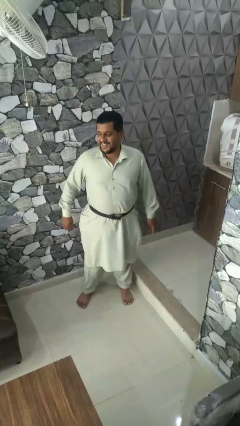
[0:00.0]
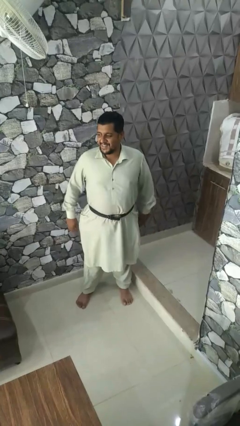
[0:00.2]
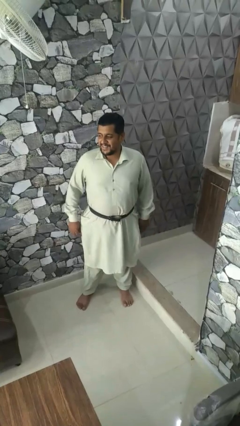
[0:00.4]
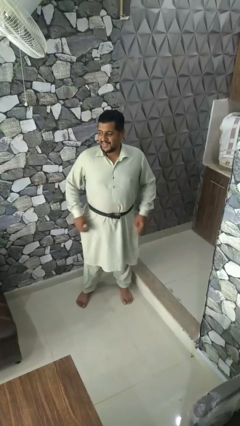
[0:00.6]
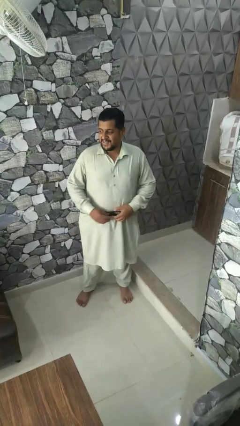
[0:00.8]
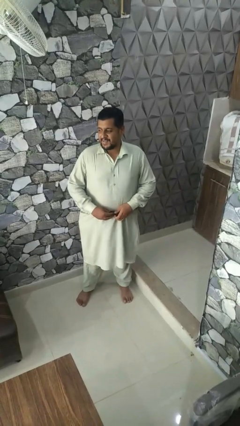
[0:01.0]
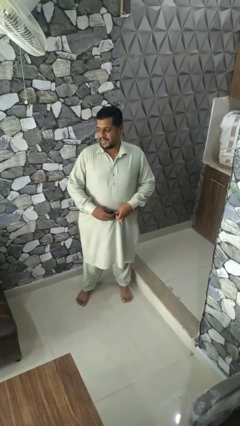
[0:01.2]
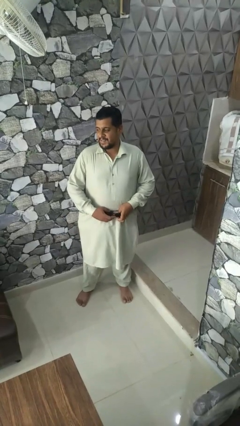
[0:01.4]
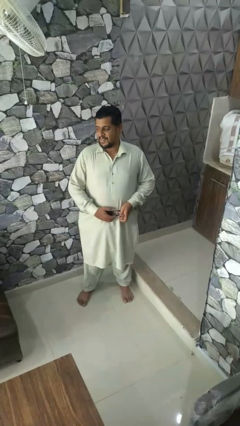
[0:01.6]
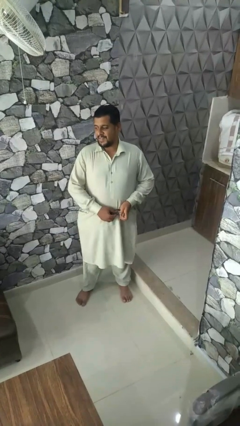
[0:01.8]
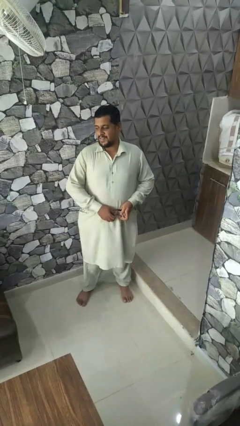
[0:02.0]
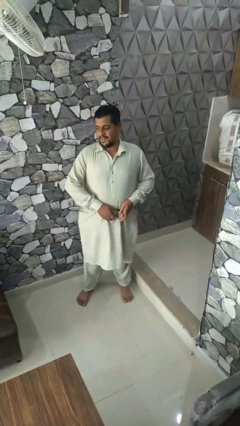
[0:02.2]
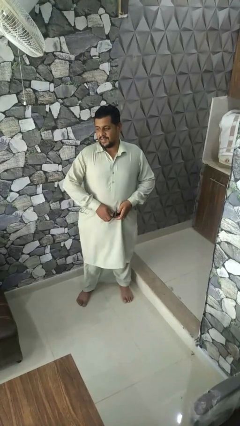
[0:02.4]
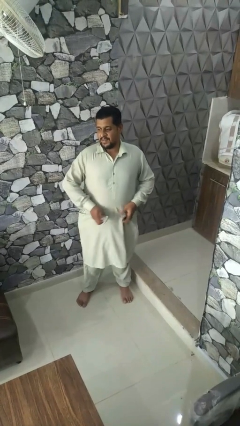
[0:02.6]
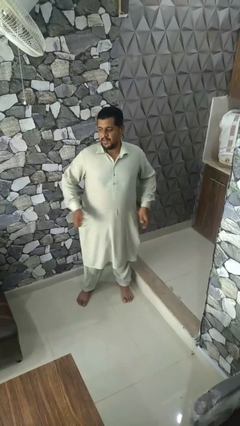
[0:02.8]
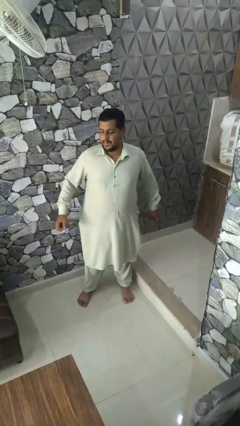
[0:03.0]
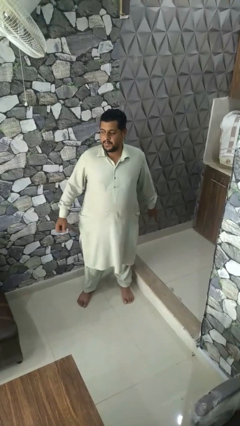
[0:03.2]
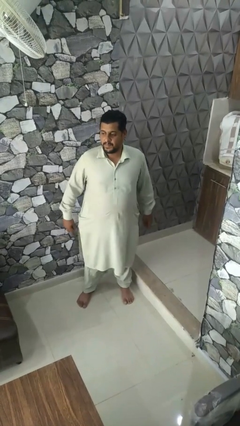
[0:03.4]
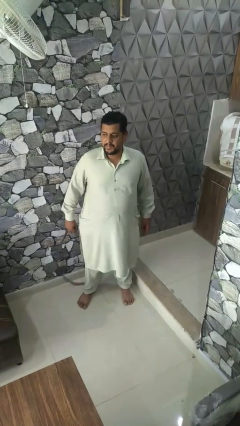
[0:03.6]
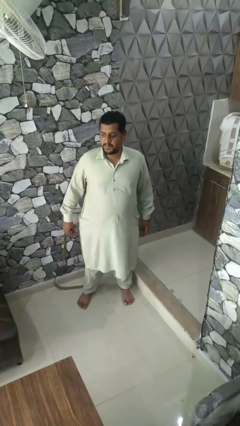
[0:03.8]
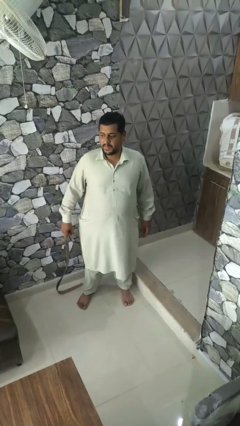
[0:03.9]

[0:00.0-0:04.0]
person takes off belt

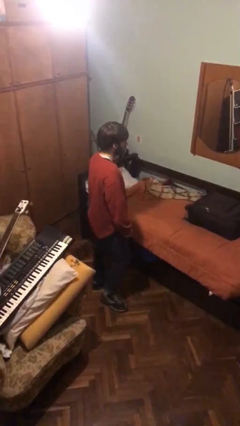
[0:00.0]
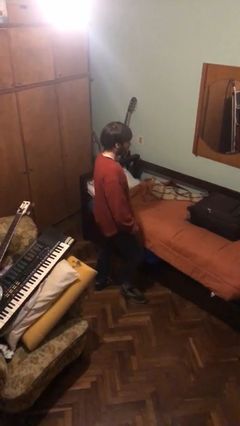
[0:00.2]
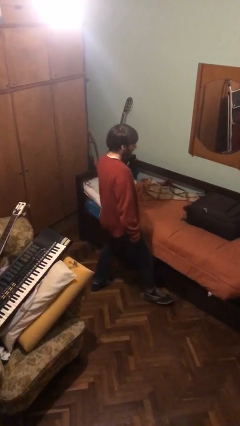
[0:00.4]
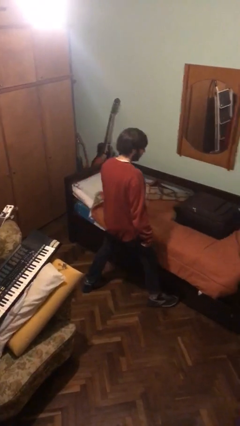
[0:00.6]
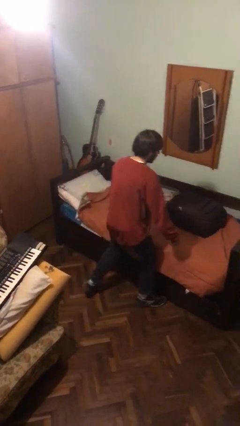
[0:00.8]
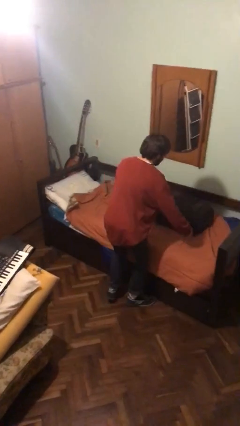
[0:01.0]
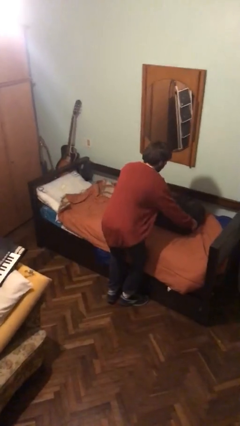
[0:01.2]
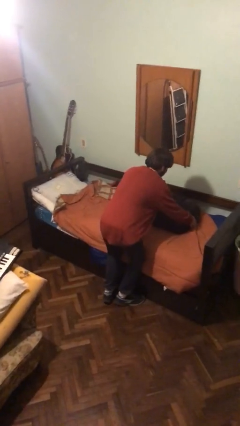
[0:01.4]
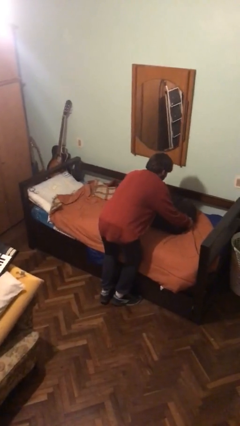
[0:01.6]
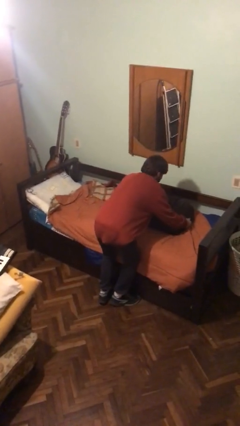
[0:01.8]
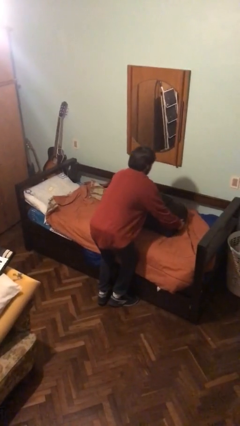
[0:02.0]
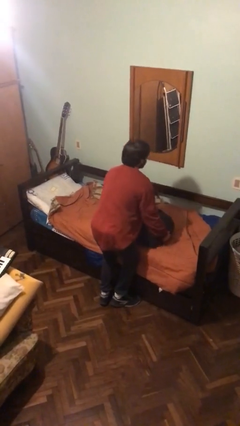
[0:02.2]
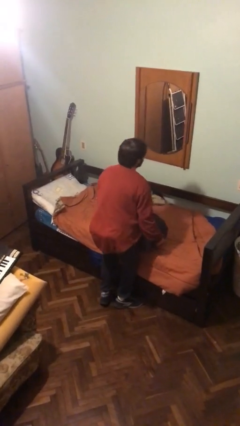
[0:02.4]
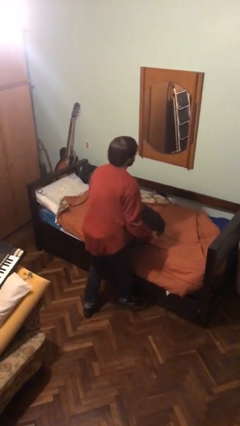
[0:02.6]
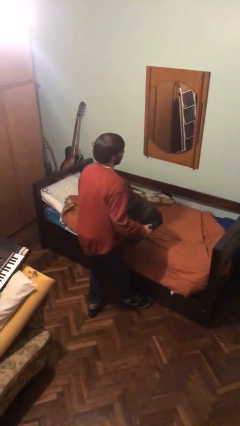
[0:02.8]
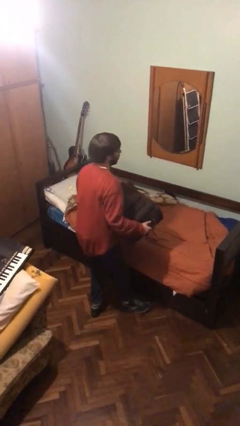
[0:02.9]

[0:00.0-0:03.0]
person picks up object from bed

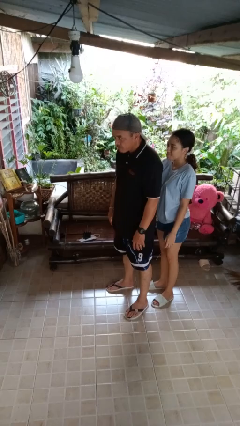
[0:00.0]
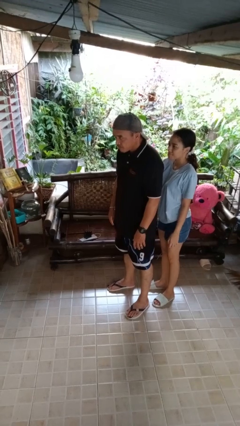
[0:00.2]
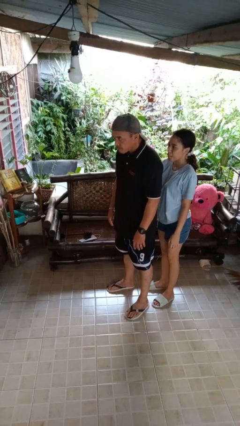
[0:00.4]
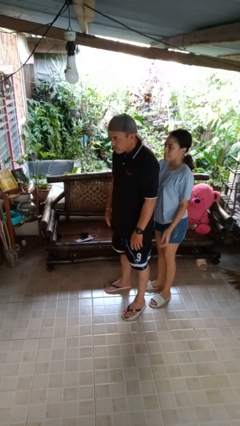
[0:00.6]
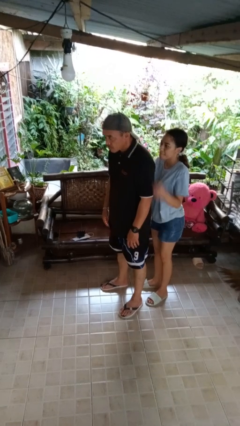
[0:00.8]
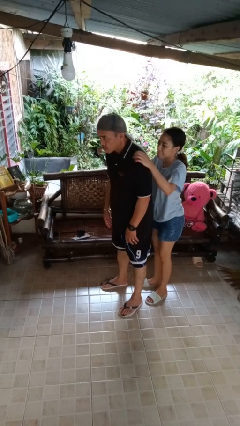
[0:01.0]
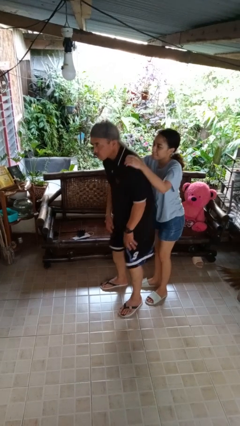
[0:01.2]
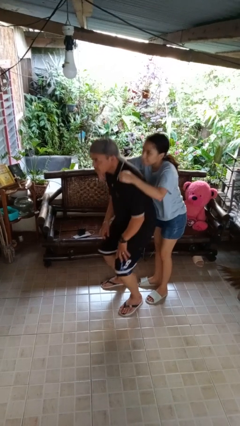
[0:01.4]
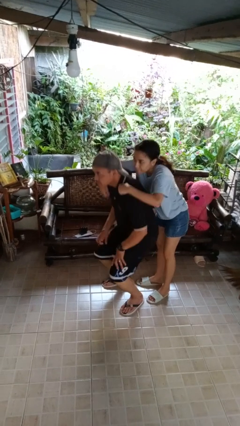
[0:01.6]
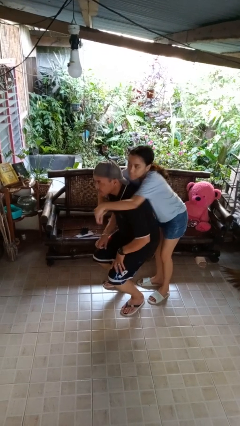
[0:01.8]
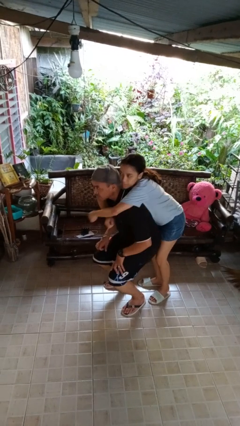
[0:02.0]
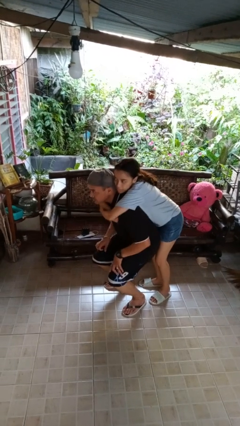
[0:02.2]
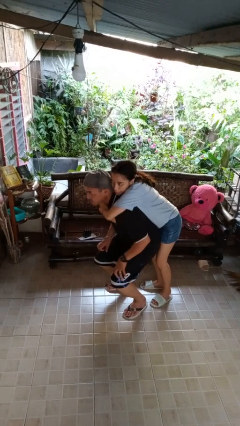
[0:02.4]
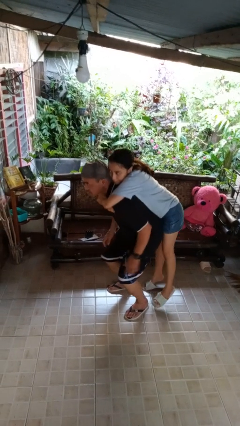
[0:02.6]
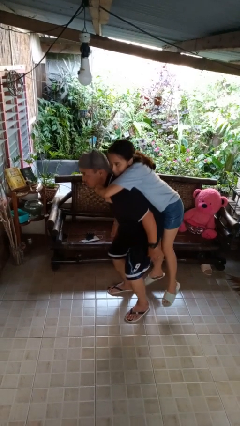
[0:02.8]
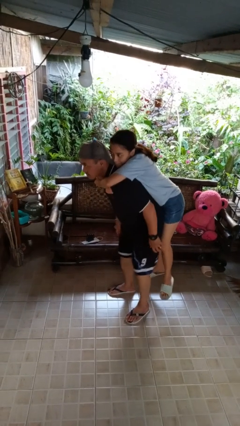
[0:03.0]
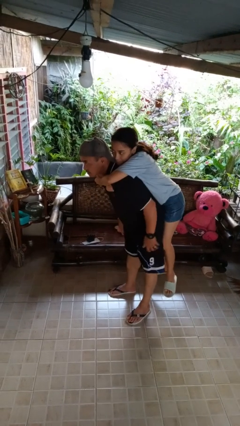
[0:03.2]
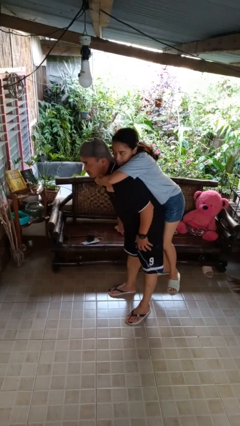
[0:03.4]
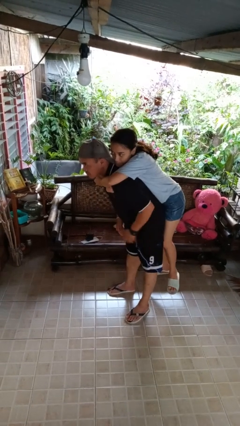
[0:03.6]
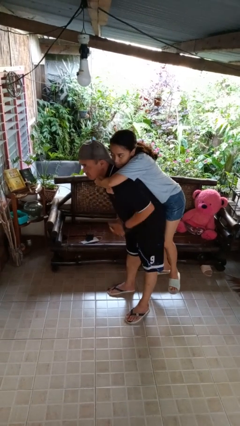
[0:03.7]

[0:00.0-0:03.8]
person picks up person

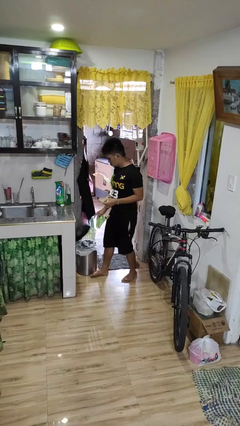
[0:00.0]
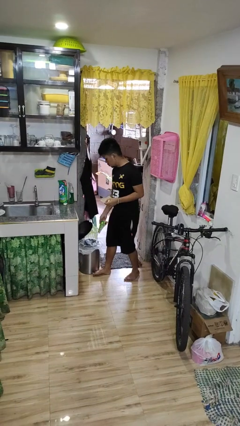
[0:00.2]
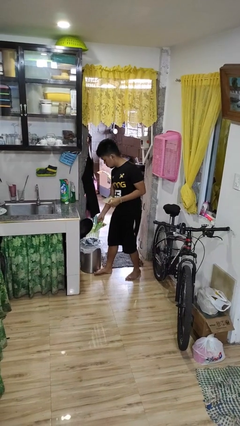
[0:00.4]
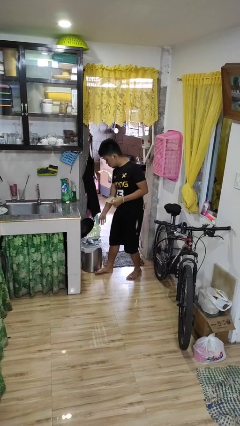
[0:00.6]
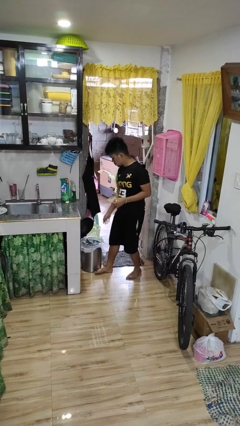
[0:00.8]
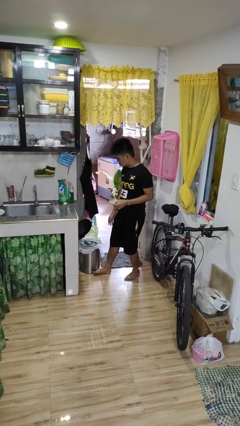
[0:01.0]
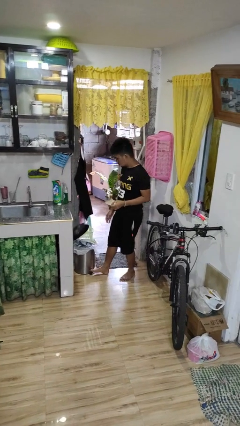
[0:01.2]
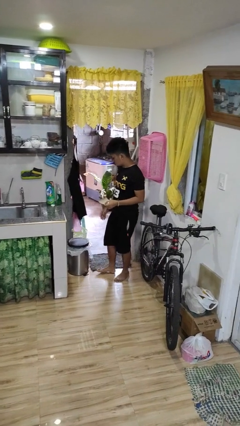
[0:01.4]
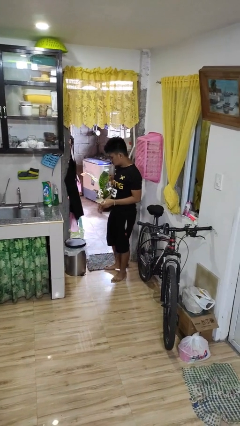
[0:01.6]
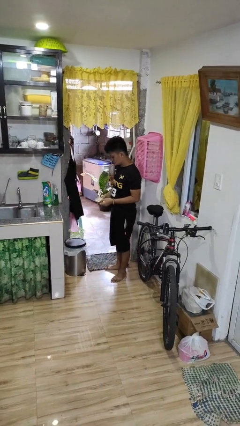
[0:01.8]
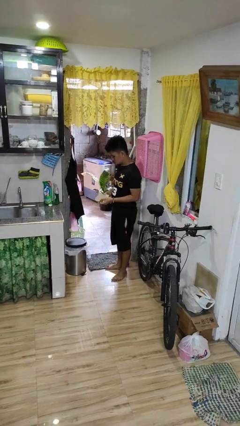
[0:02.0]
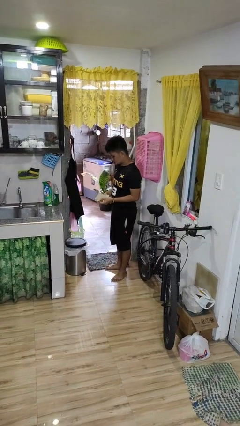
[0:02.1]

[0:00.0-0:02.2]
person discards trash

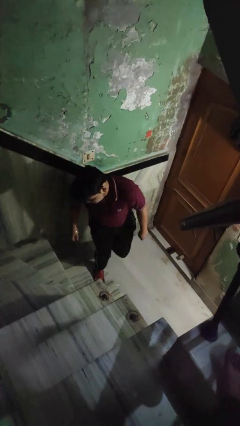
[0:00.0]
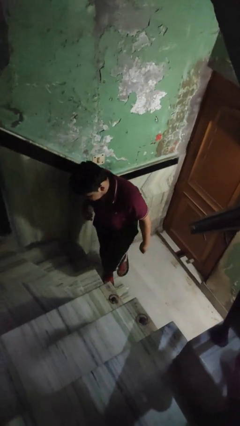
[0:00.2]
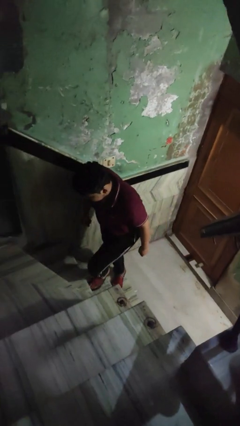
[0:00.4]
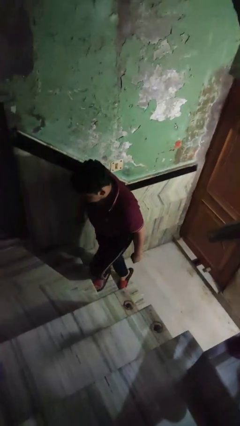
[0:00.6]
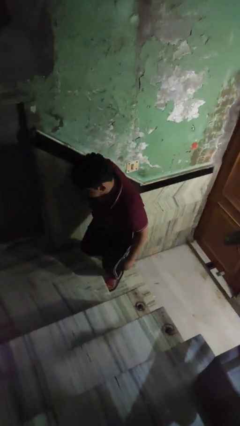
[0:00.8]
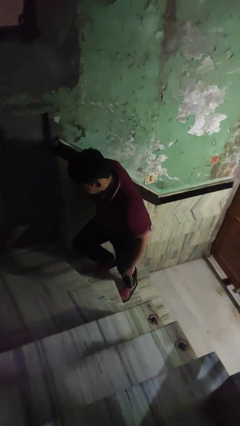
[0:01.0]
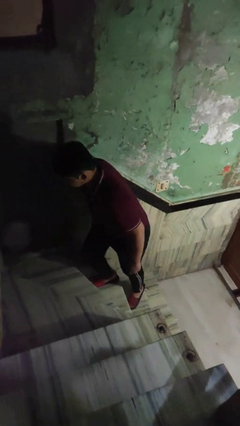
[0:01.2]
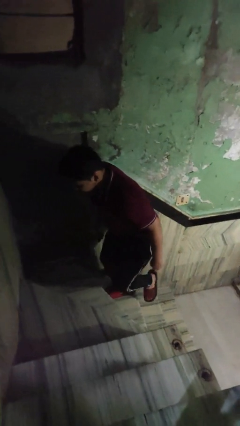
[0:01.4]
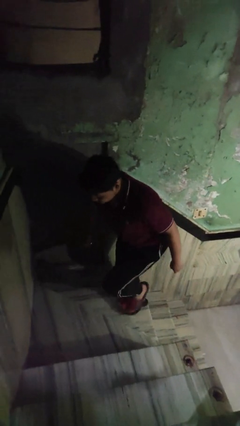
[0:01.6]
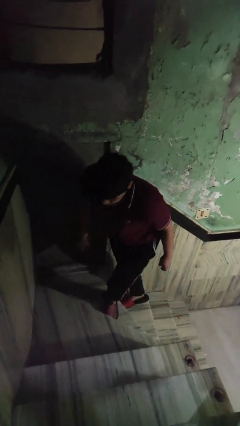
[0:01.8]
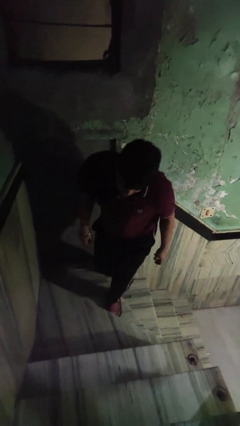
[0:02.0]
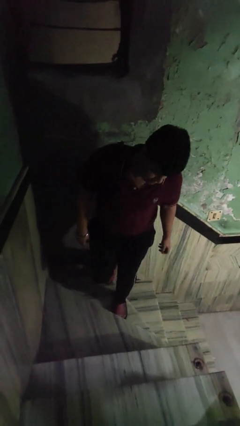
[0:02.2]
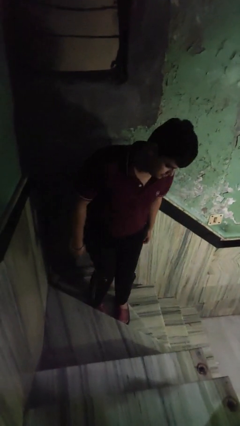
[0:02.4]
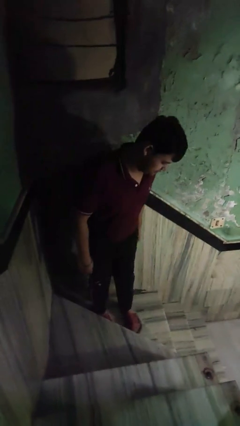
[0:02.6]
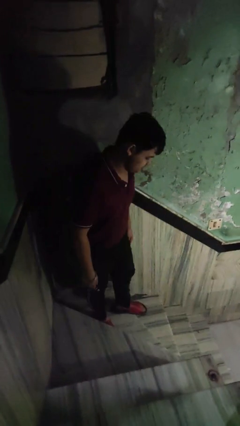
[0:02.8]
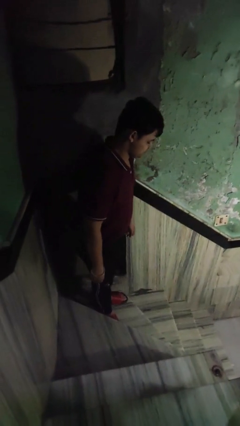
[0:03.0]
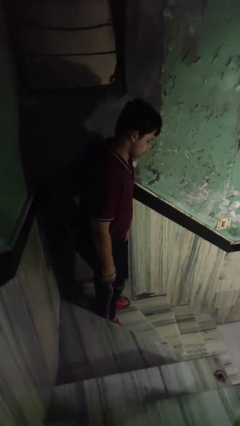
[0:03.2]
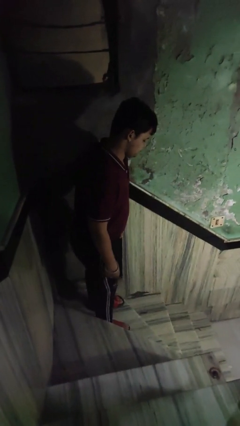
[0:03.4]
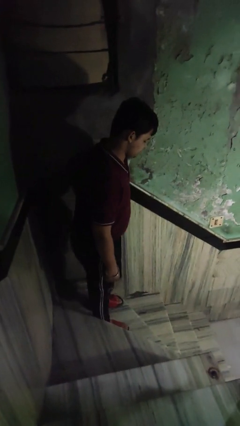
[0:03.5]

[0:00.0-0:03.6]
person climbs up stairs

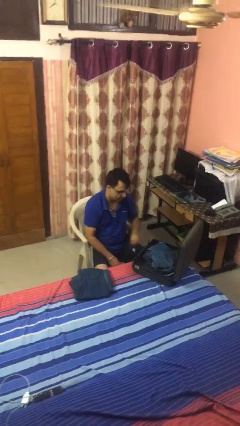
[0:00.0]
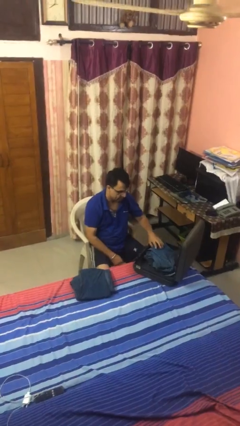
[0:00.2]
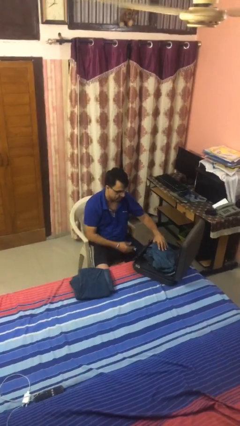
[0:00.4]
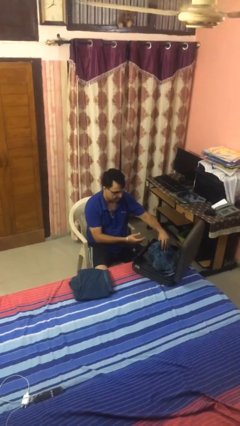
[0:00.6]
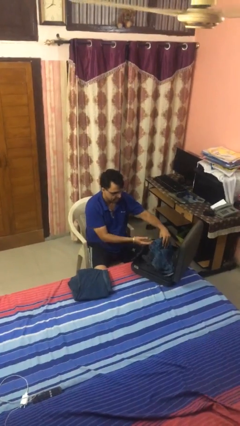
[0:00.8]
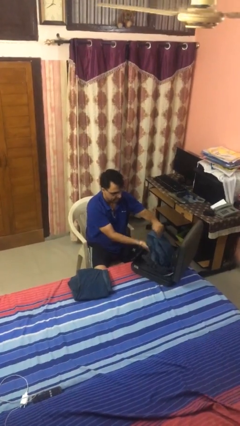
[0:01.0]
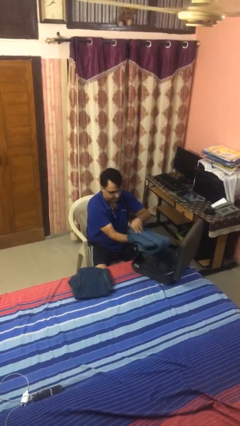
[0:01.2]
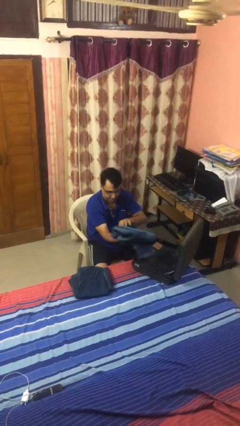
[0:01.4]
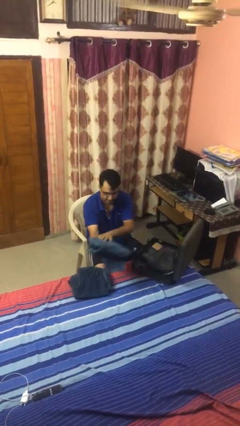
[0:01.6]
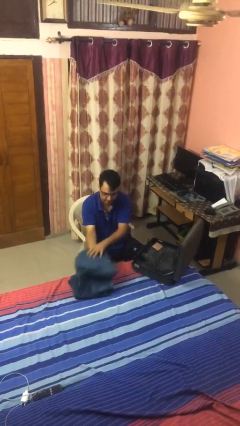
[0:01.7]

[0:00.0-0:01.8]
person unloads clothes from suitcase
